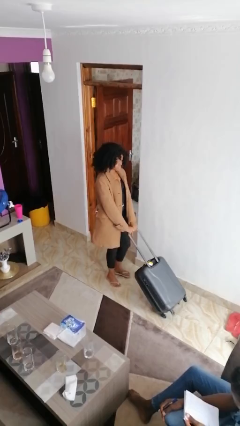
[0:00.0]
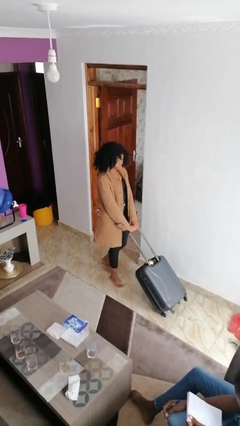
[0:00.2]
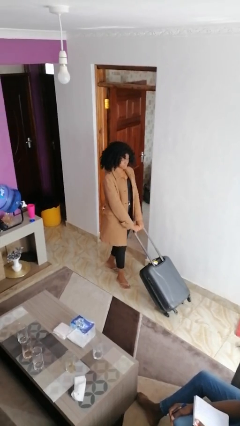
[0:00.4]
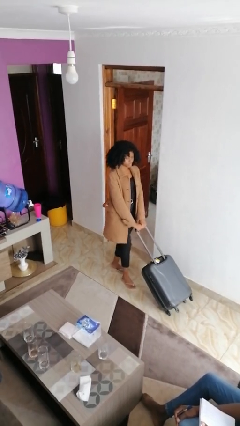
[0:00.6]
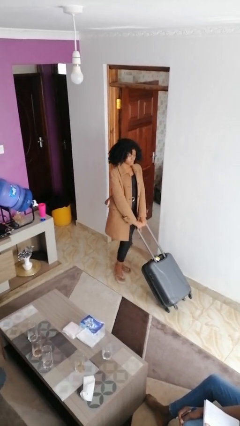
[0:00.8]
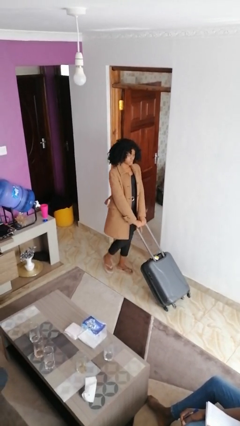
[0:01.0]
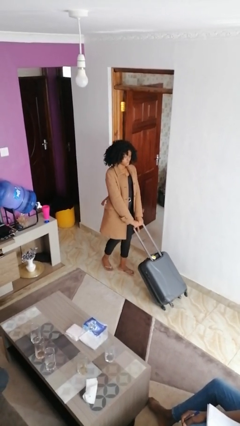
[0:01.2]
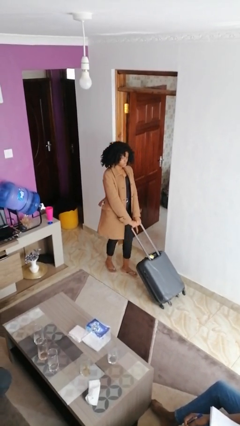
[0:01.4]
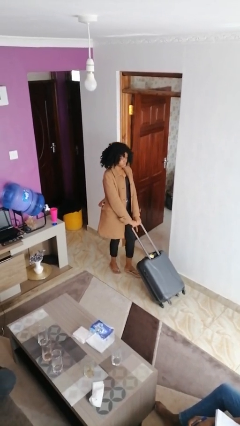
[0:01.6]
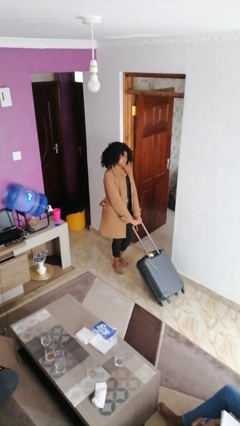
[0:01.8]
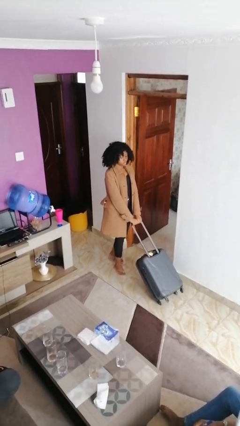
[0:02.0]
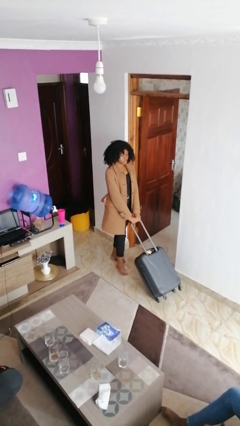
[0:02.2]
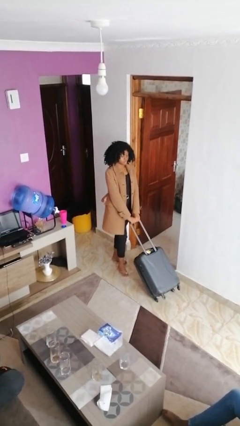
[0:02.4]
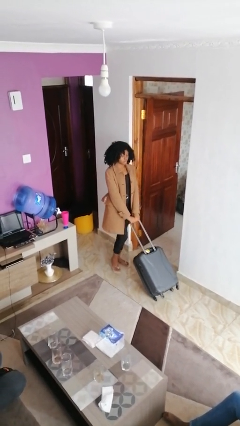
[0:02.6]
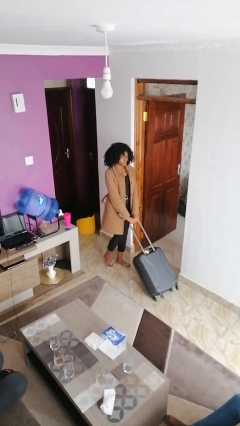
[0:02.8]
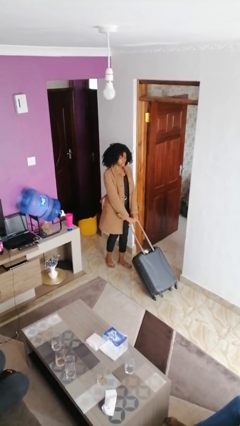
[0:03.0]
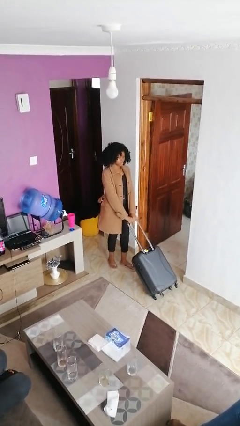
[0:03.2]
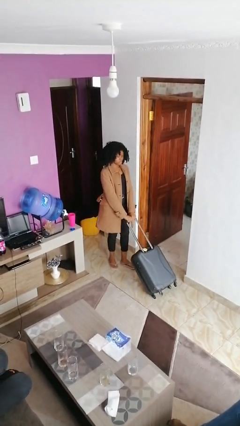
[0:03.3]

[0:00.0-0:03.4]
person pulls wheeled cart

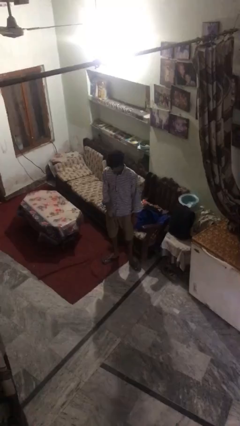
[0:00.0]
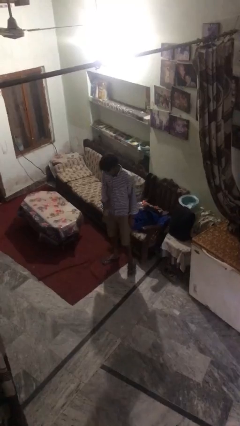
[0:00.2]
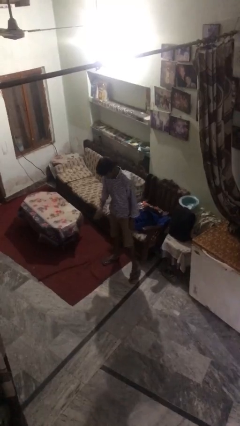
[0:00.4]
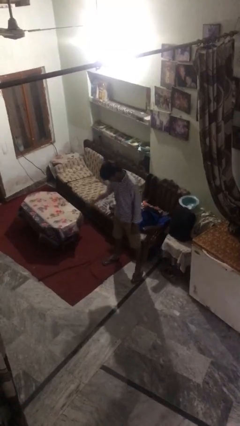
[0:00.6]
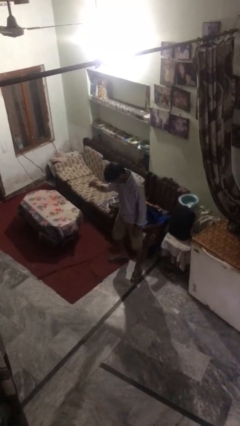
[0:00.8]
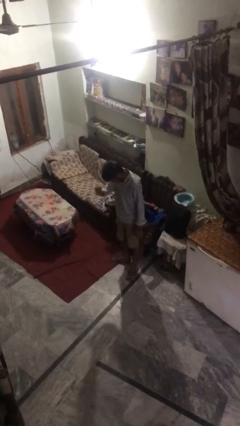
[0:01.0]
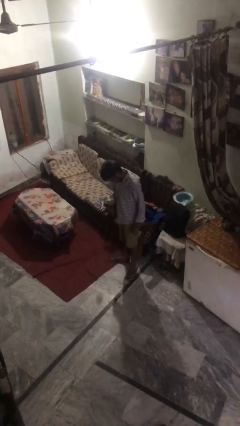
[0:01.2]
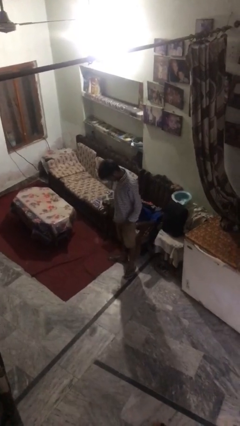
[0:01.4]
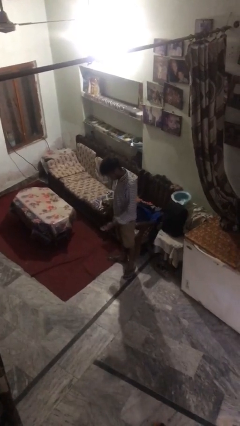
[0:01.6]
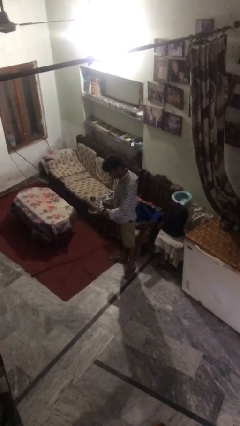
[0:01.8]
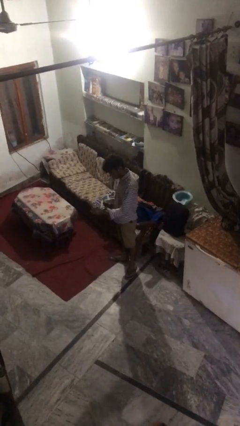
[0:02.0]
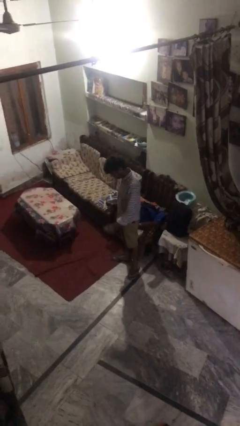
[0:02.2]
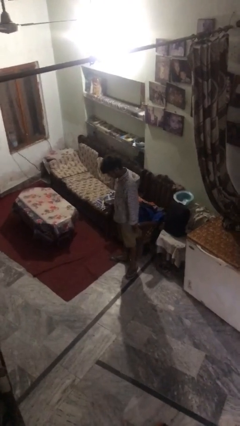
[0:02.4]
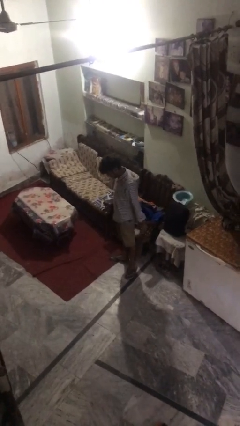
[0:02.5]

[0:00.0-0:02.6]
person bounces ball on floor

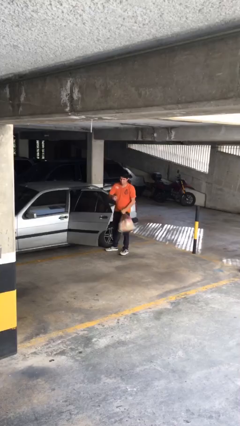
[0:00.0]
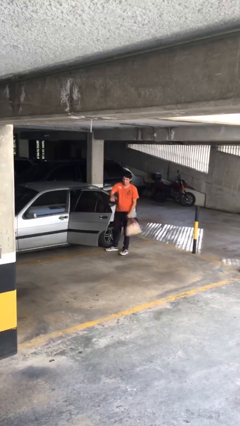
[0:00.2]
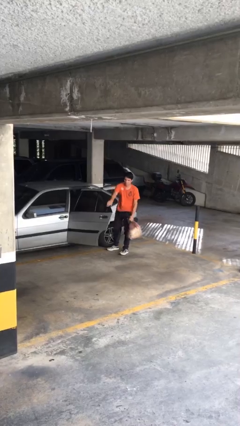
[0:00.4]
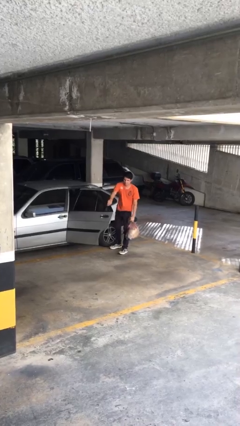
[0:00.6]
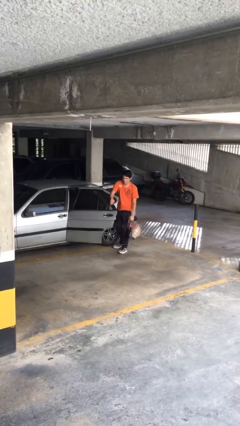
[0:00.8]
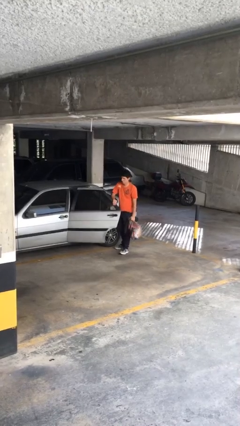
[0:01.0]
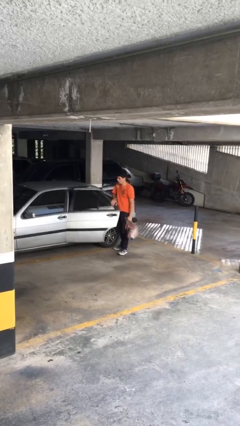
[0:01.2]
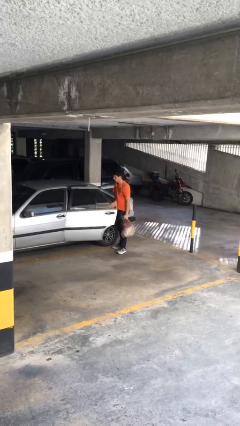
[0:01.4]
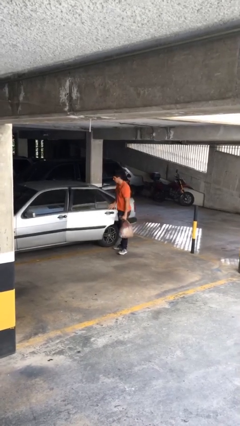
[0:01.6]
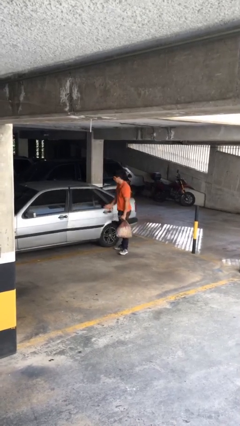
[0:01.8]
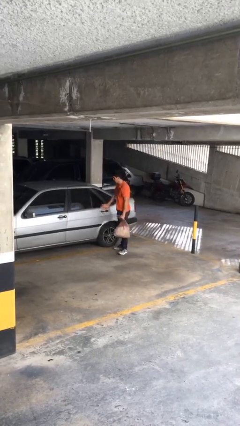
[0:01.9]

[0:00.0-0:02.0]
person closes car door

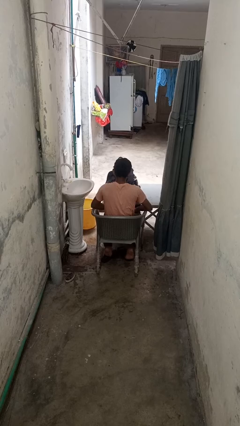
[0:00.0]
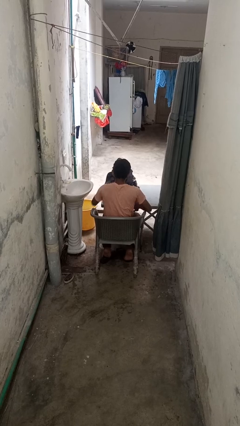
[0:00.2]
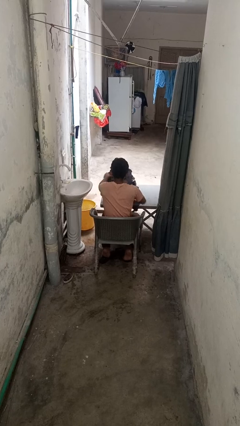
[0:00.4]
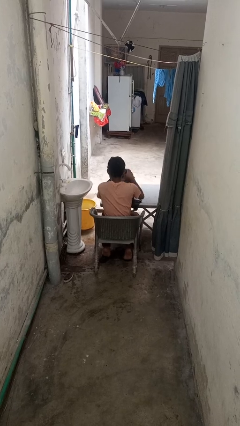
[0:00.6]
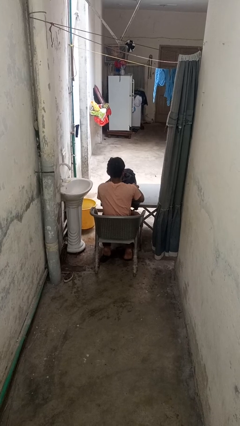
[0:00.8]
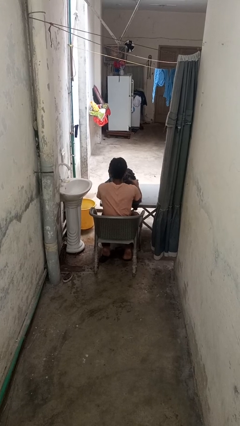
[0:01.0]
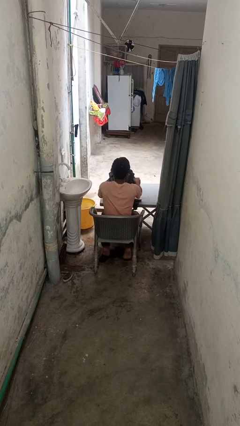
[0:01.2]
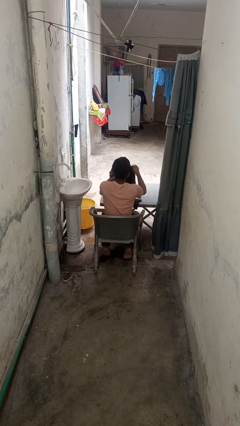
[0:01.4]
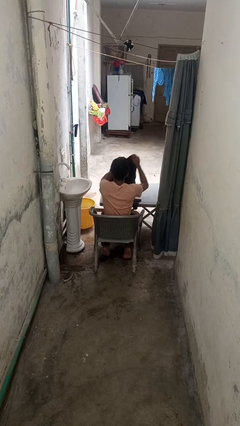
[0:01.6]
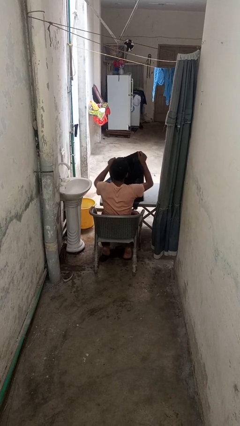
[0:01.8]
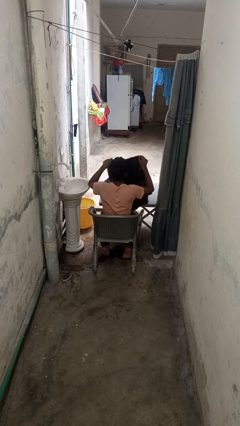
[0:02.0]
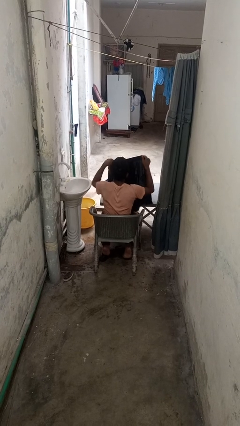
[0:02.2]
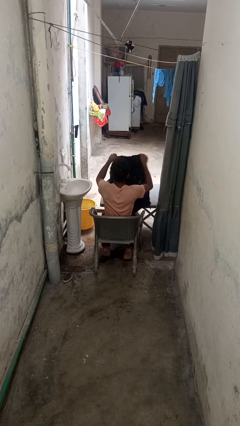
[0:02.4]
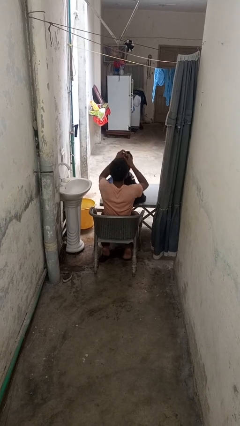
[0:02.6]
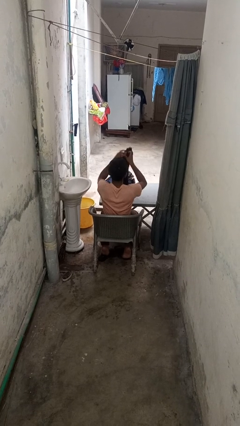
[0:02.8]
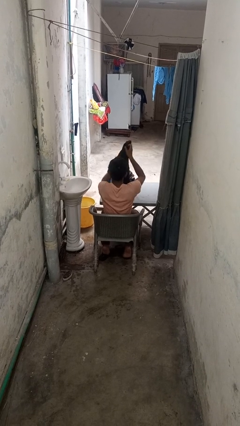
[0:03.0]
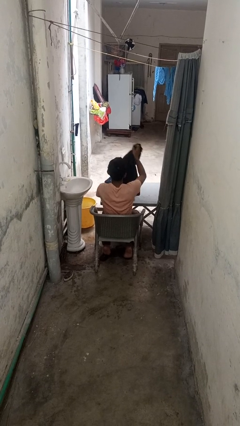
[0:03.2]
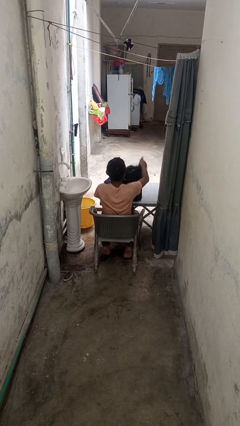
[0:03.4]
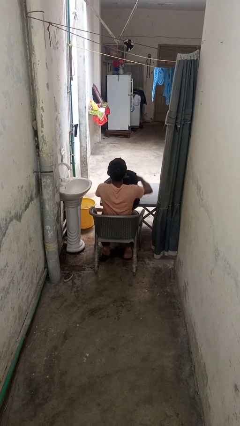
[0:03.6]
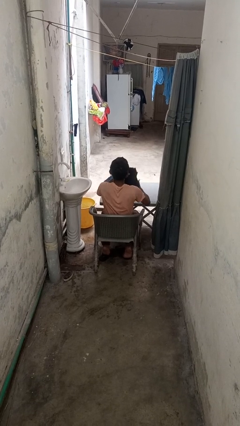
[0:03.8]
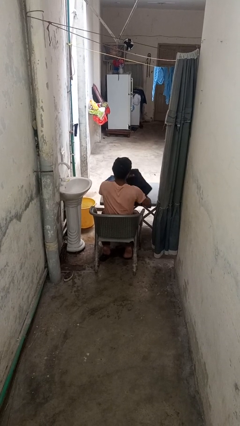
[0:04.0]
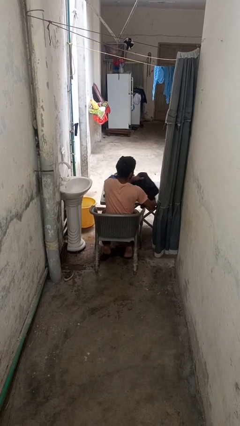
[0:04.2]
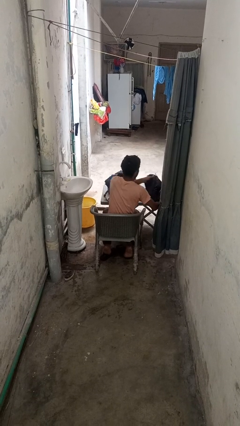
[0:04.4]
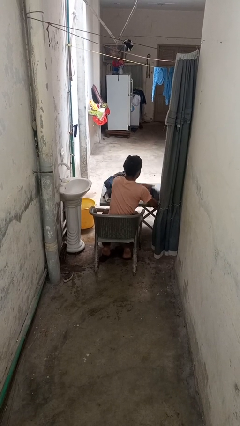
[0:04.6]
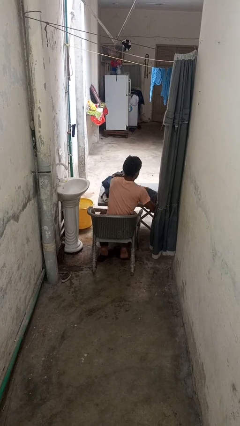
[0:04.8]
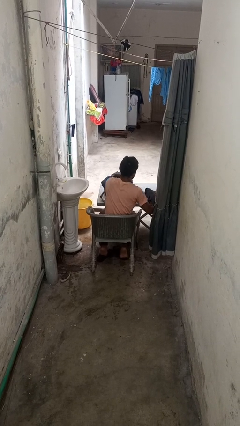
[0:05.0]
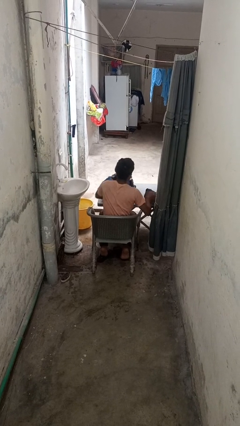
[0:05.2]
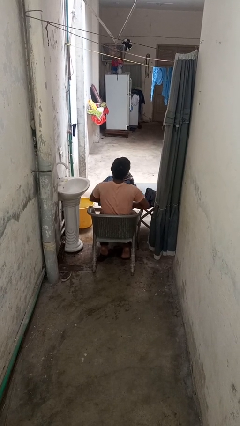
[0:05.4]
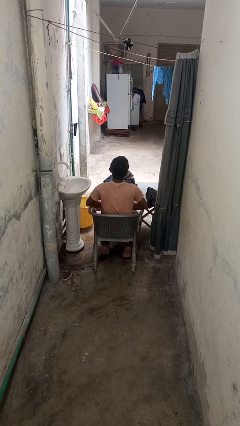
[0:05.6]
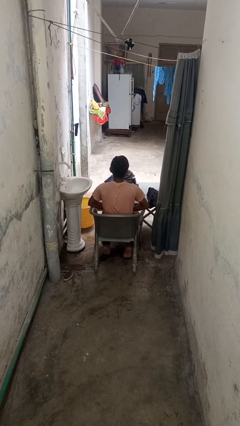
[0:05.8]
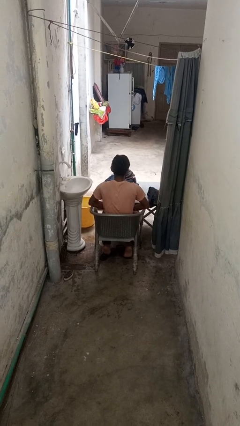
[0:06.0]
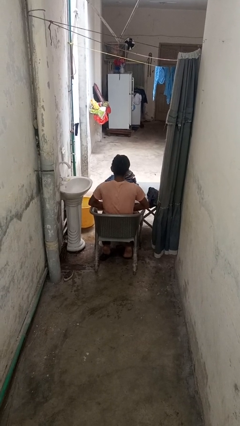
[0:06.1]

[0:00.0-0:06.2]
person folds shirt

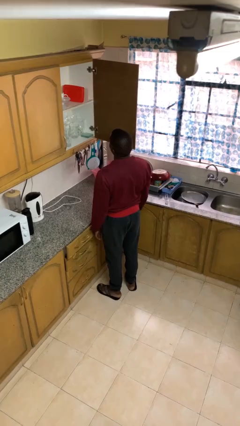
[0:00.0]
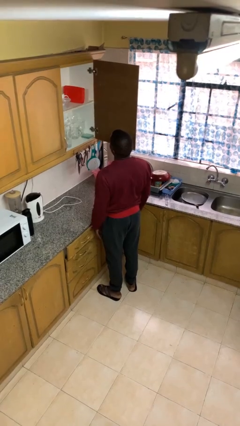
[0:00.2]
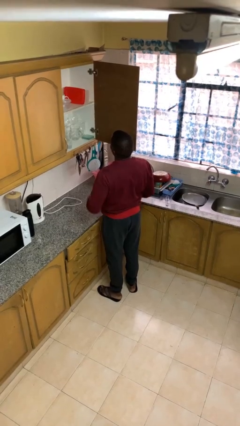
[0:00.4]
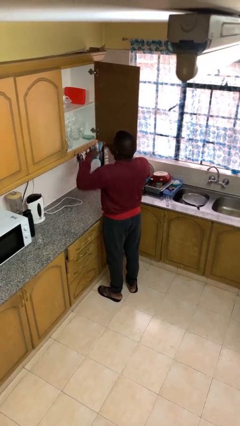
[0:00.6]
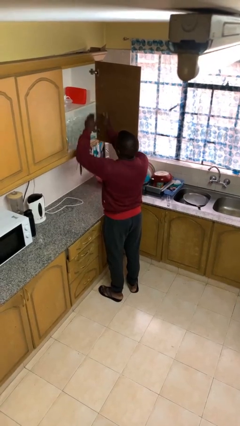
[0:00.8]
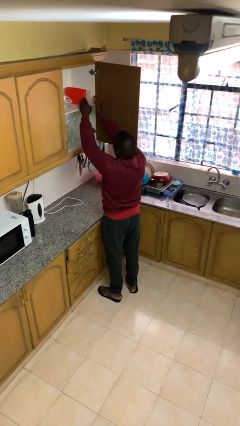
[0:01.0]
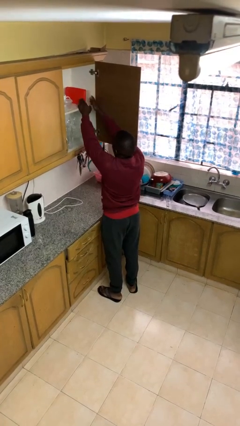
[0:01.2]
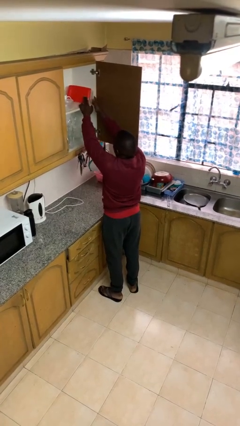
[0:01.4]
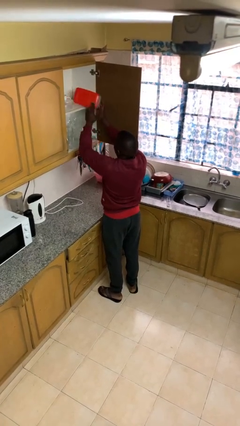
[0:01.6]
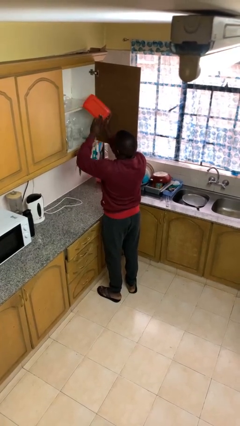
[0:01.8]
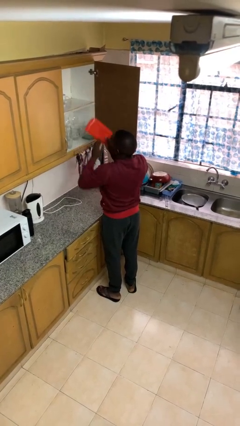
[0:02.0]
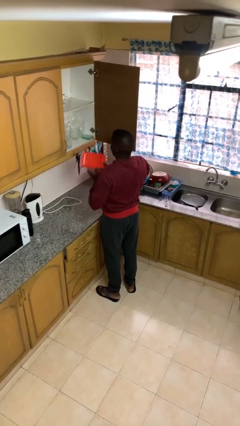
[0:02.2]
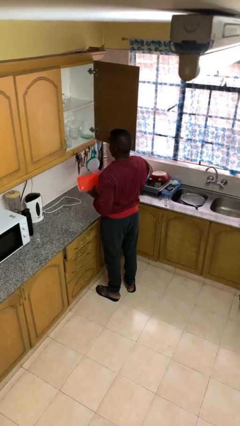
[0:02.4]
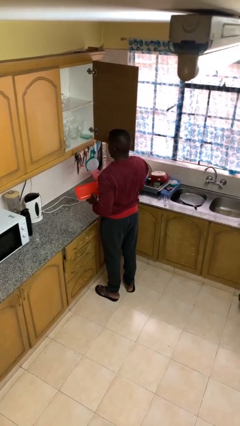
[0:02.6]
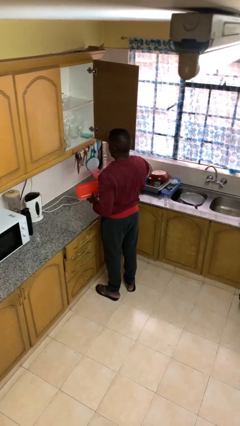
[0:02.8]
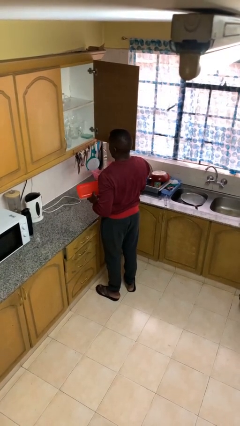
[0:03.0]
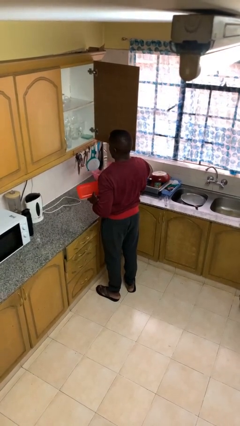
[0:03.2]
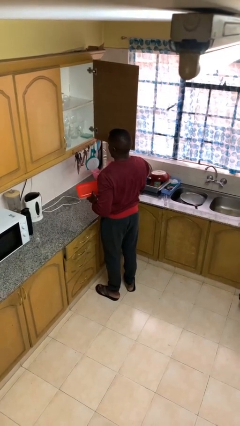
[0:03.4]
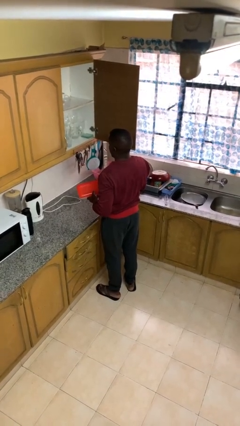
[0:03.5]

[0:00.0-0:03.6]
person picks up object from cabinet
